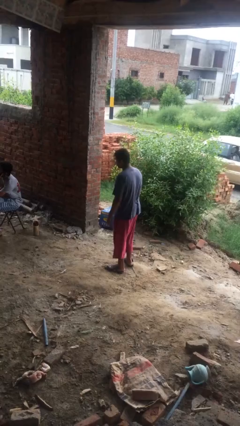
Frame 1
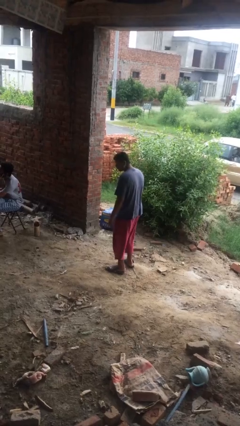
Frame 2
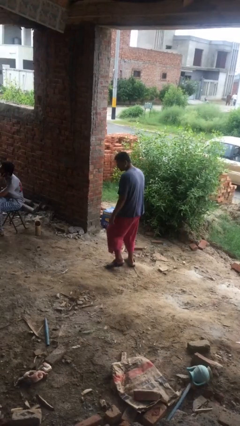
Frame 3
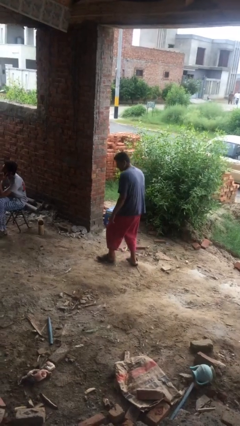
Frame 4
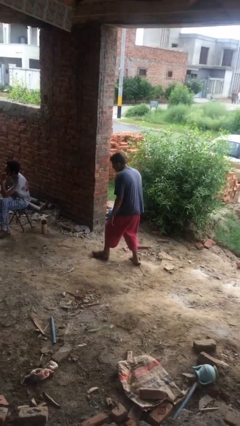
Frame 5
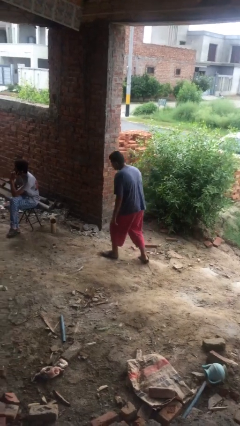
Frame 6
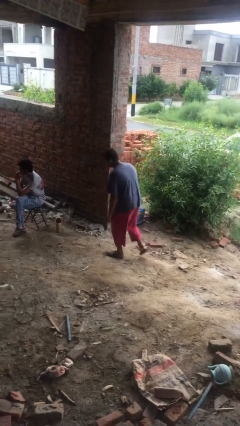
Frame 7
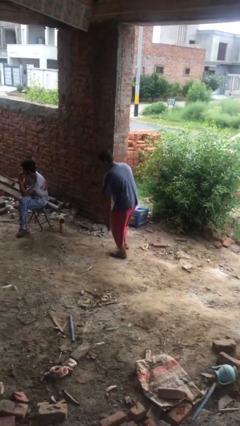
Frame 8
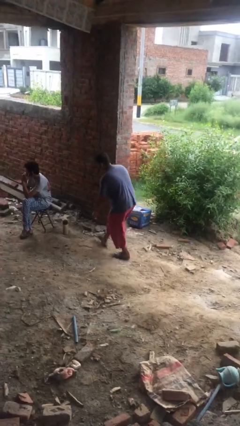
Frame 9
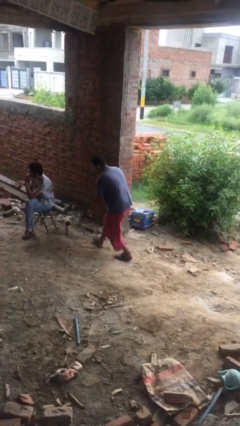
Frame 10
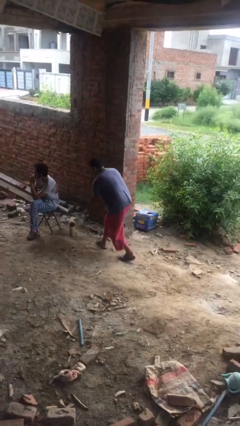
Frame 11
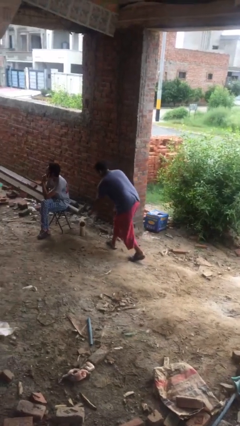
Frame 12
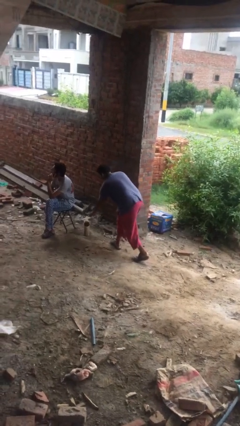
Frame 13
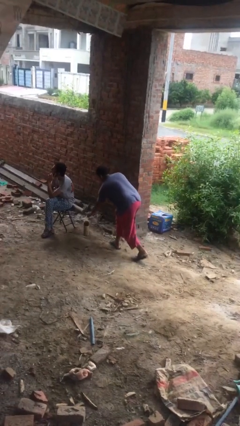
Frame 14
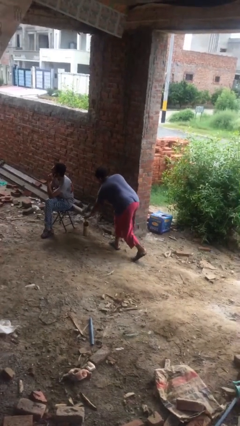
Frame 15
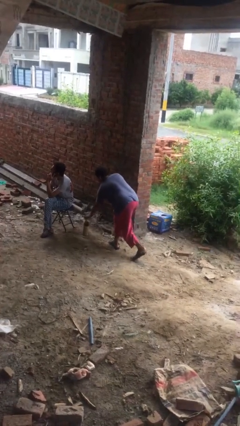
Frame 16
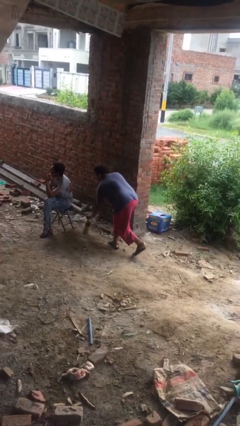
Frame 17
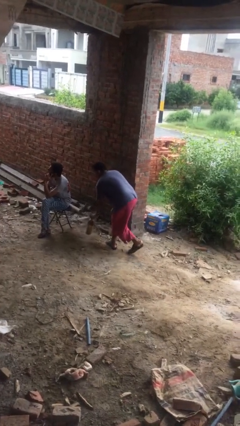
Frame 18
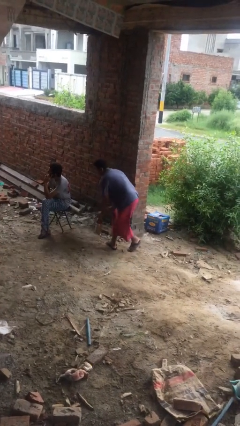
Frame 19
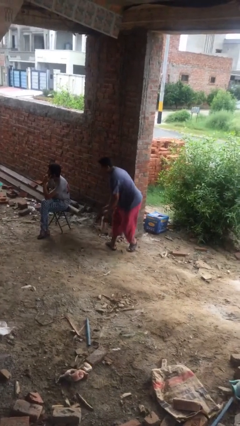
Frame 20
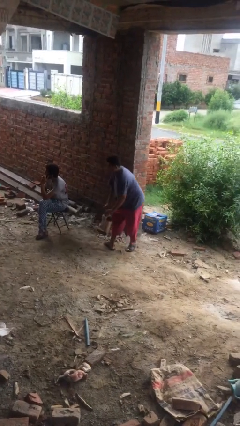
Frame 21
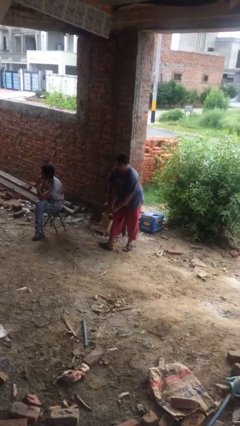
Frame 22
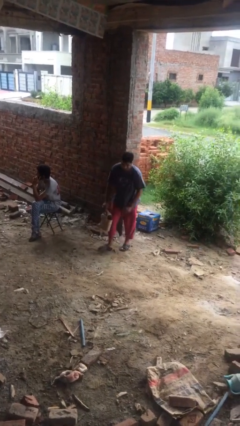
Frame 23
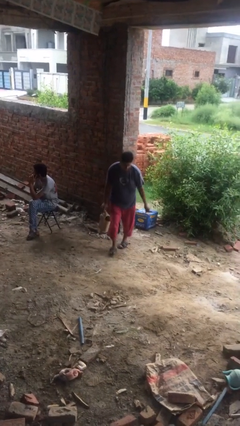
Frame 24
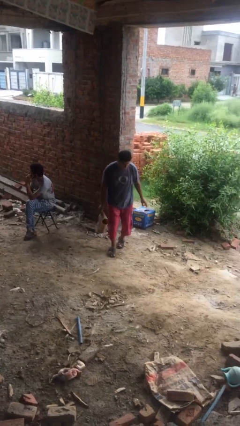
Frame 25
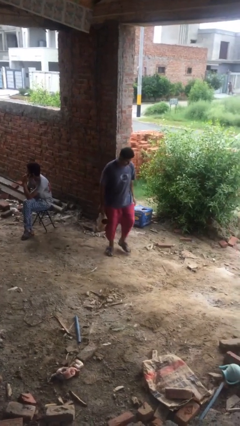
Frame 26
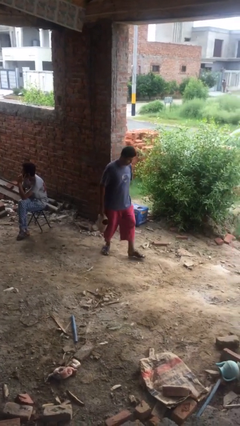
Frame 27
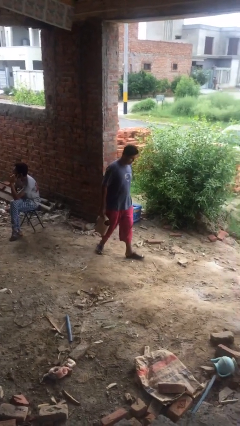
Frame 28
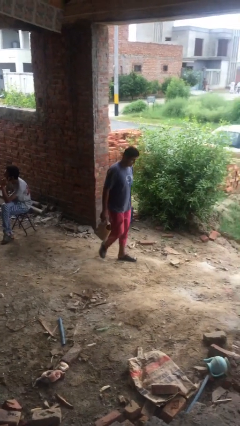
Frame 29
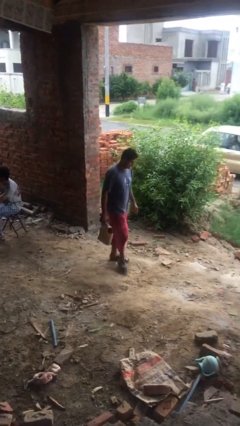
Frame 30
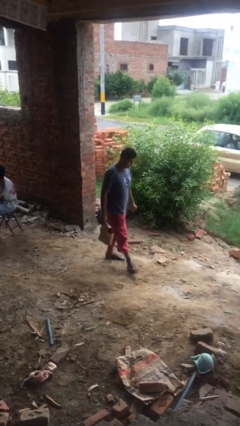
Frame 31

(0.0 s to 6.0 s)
person steals object from person

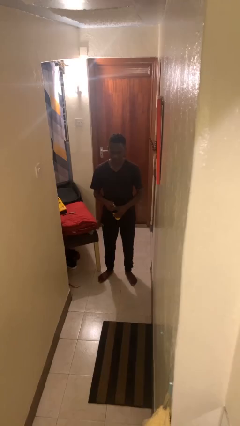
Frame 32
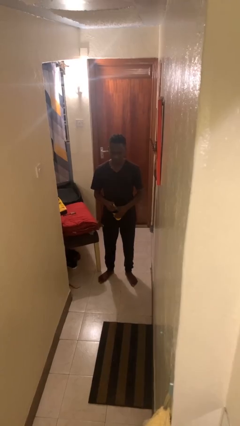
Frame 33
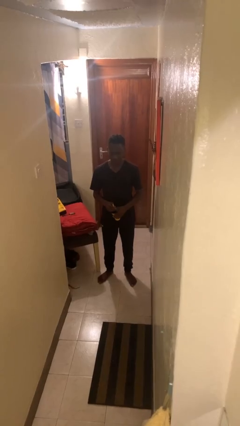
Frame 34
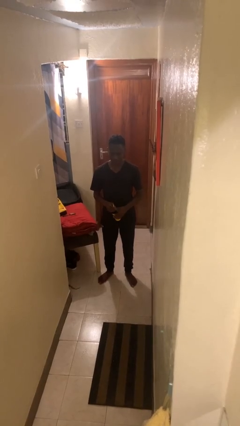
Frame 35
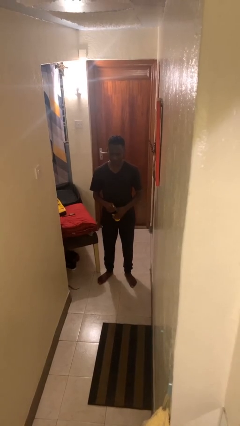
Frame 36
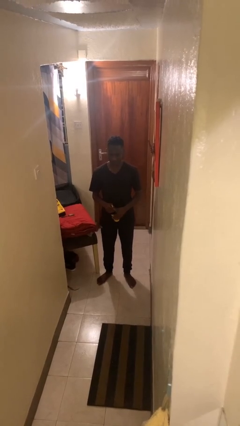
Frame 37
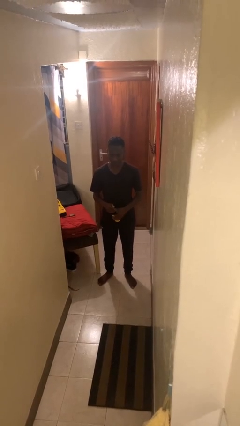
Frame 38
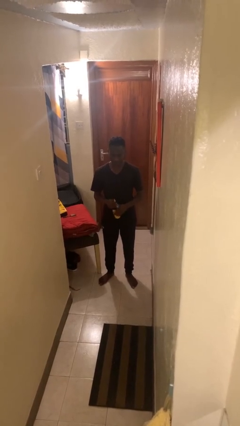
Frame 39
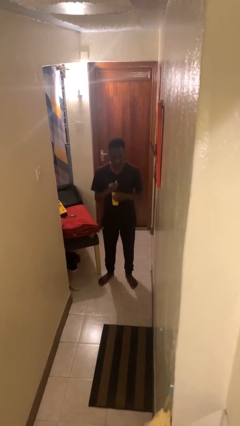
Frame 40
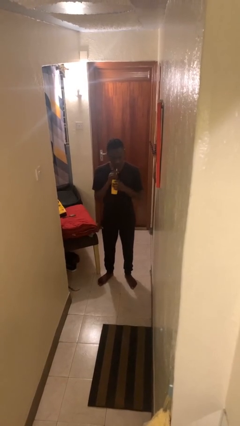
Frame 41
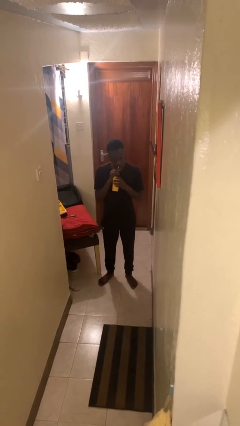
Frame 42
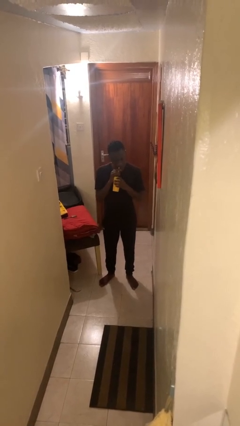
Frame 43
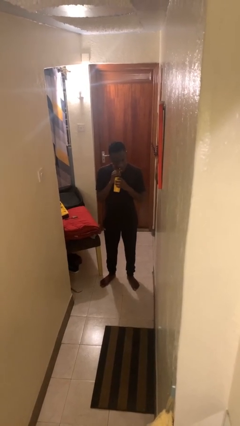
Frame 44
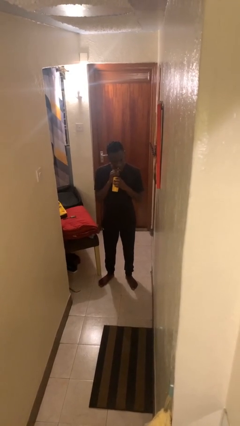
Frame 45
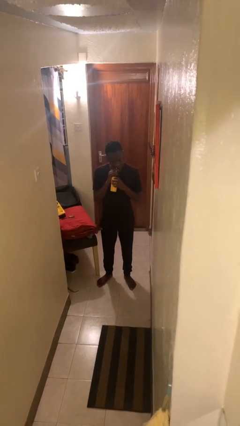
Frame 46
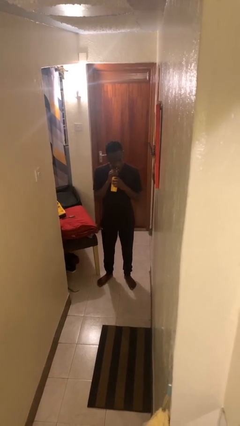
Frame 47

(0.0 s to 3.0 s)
person drinks from straw

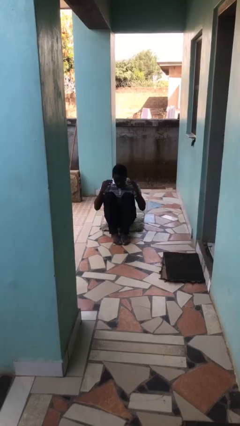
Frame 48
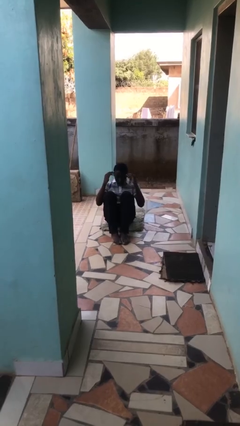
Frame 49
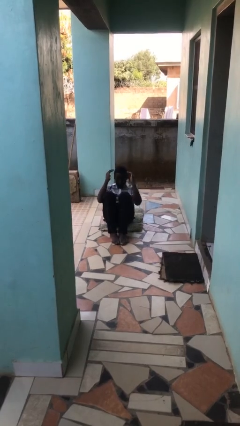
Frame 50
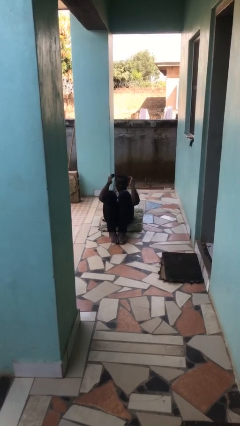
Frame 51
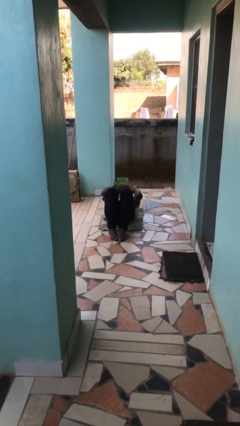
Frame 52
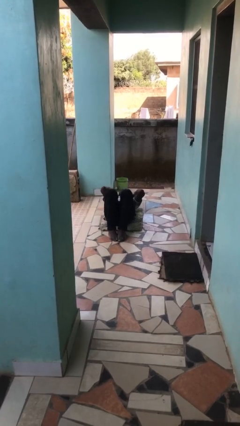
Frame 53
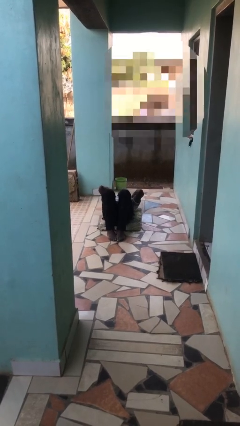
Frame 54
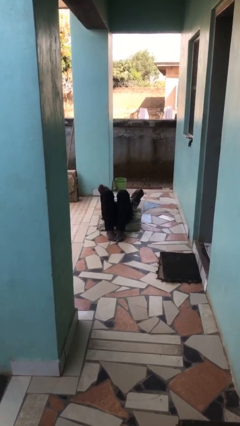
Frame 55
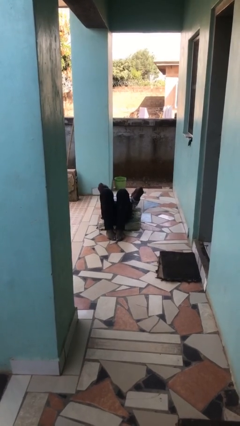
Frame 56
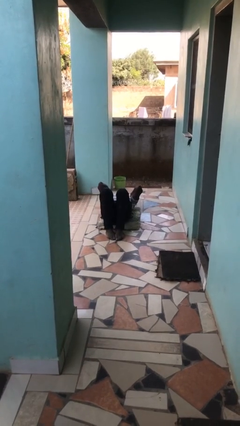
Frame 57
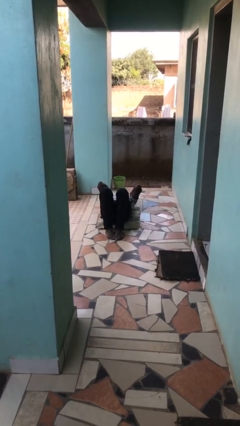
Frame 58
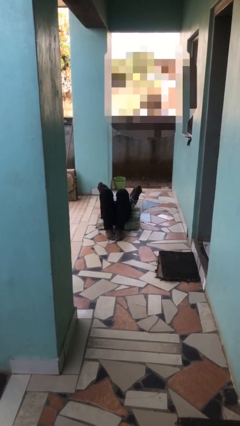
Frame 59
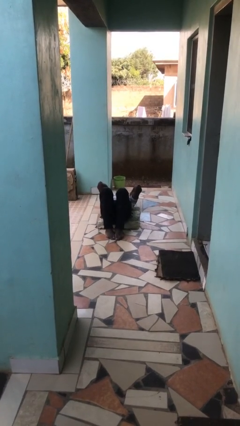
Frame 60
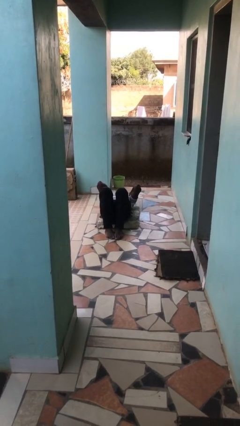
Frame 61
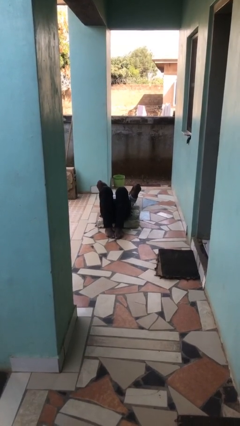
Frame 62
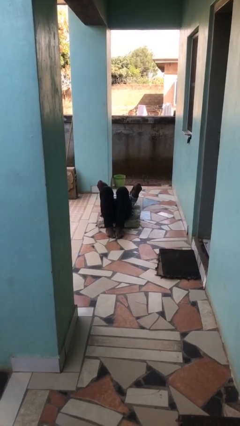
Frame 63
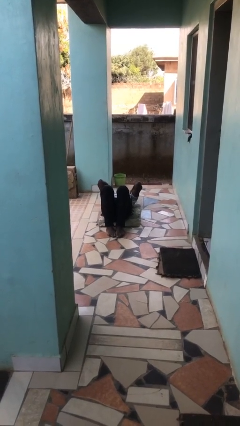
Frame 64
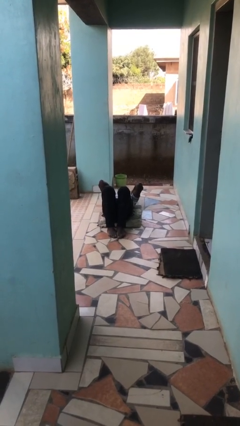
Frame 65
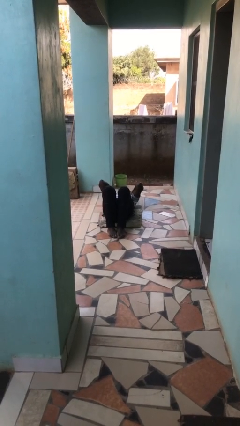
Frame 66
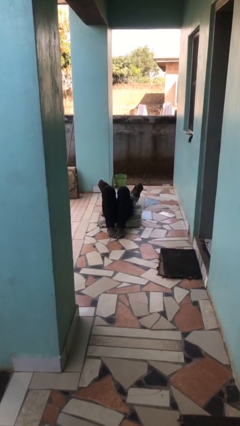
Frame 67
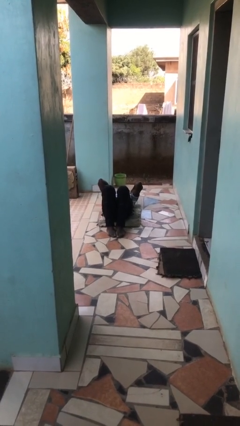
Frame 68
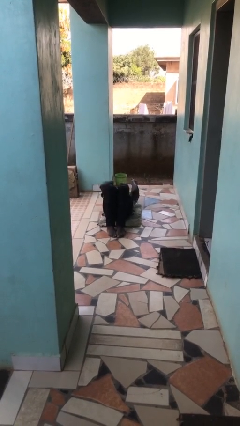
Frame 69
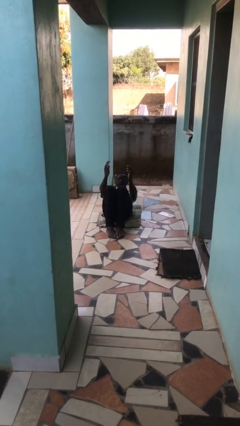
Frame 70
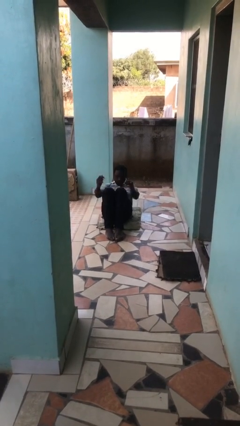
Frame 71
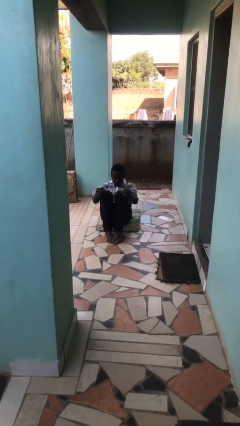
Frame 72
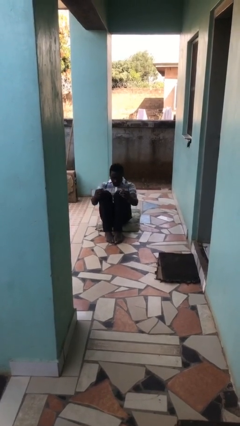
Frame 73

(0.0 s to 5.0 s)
person exercises with situp

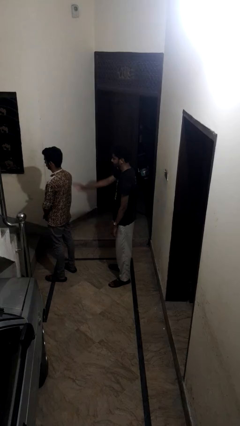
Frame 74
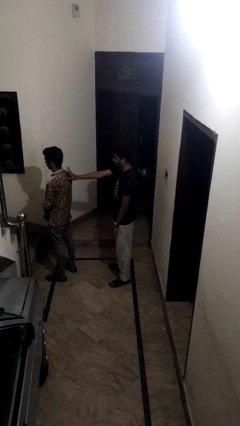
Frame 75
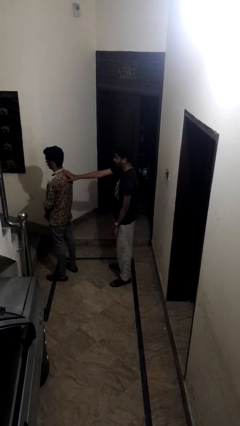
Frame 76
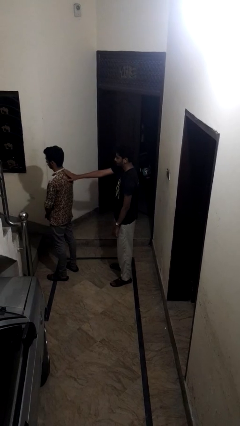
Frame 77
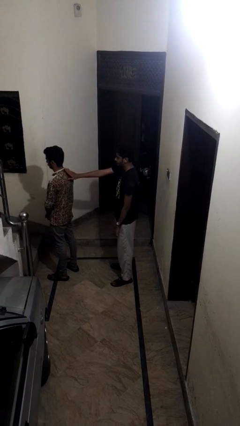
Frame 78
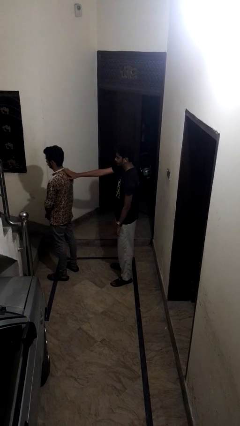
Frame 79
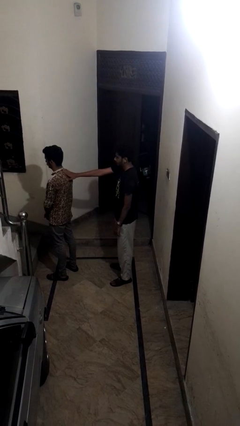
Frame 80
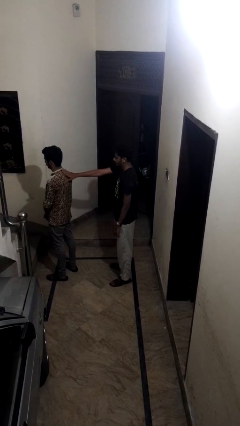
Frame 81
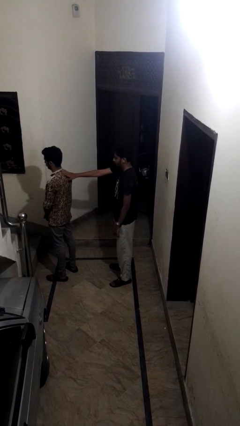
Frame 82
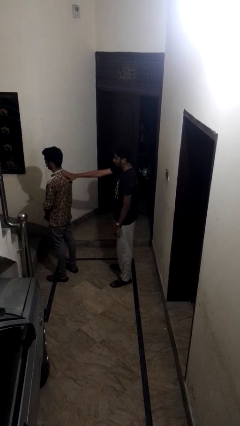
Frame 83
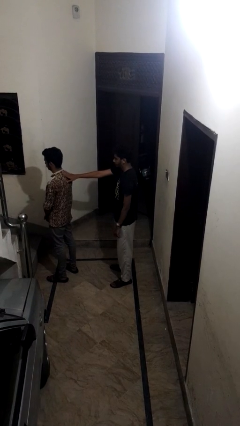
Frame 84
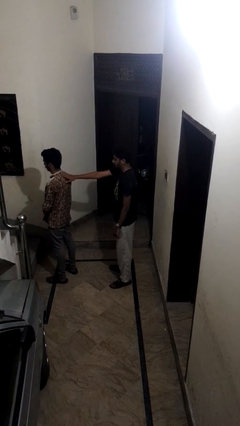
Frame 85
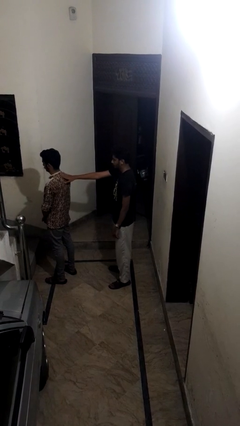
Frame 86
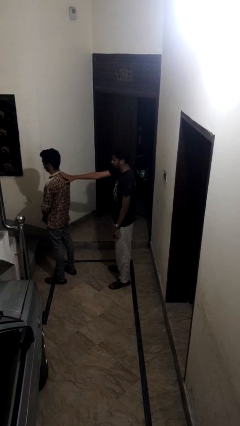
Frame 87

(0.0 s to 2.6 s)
person touches back of person

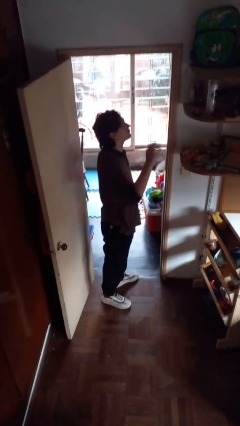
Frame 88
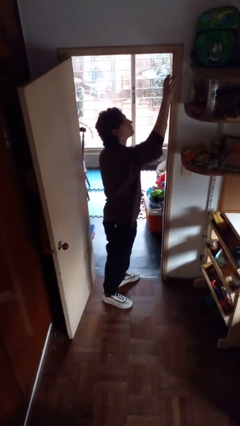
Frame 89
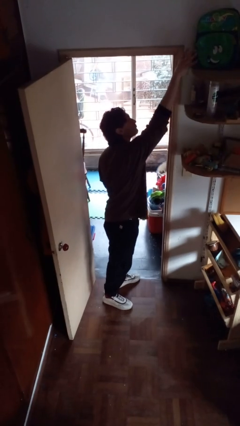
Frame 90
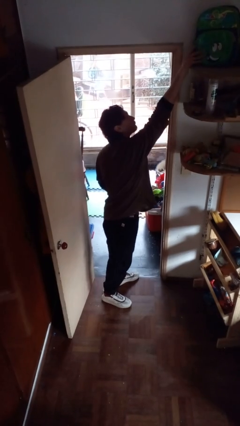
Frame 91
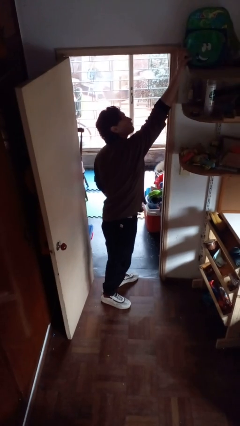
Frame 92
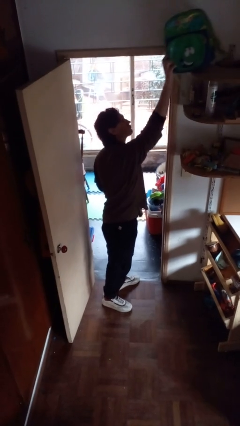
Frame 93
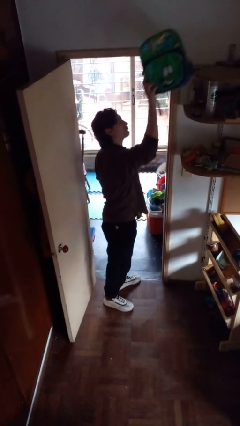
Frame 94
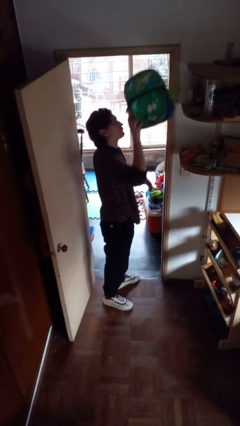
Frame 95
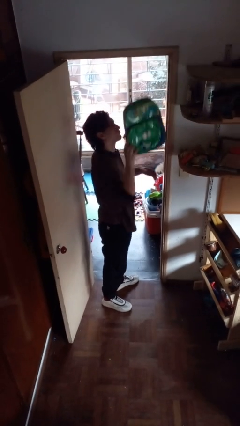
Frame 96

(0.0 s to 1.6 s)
person puts down object on shelf
